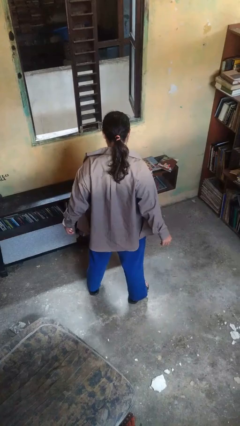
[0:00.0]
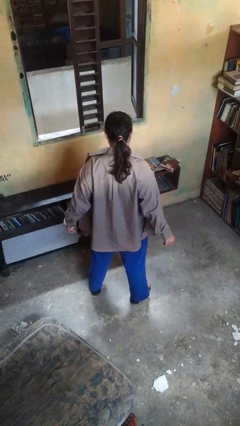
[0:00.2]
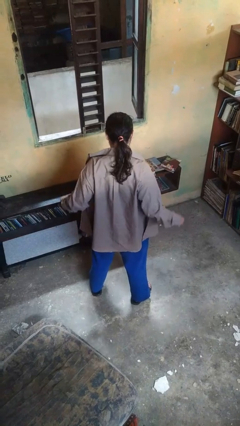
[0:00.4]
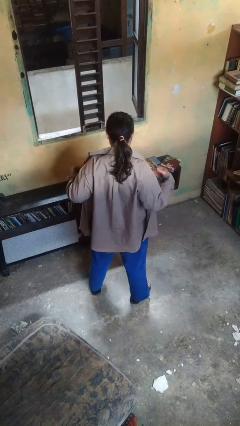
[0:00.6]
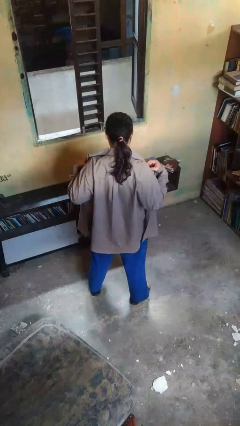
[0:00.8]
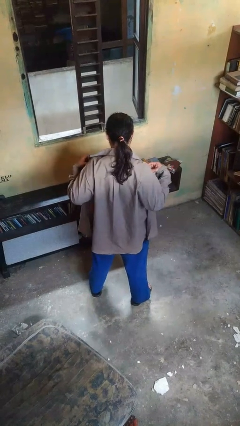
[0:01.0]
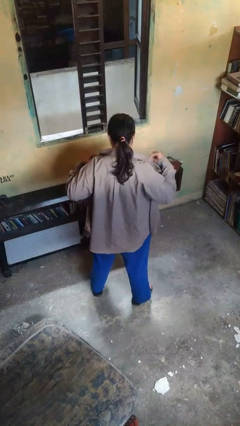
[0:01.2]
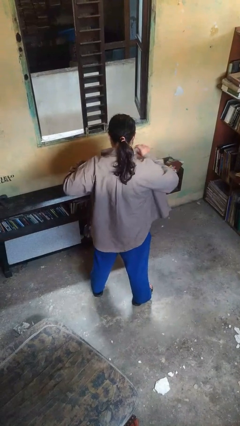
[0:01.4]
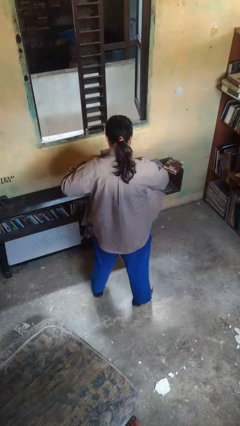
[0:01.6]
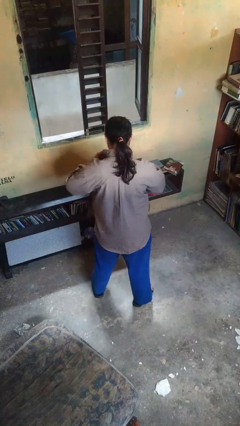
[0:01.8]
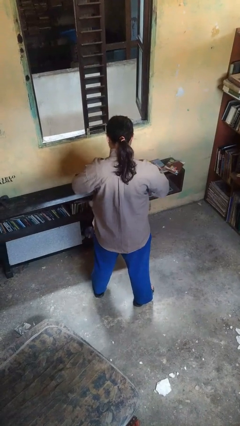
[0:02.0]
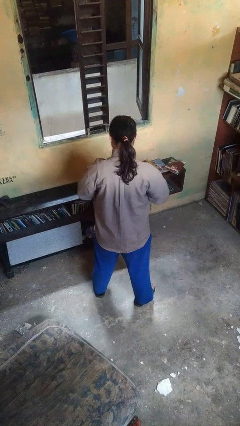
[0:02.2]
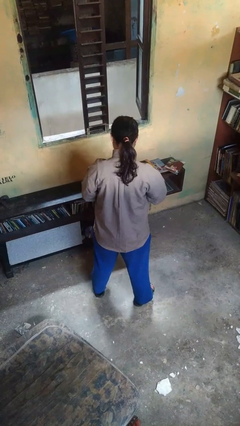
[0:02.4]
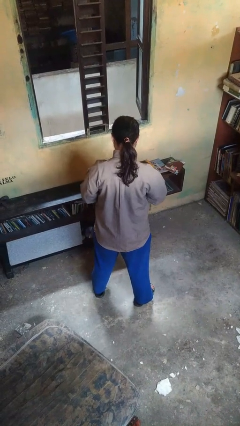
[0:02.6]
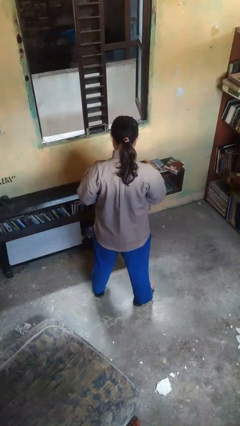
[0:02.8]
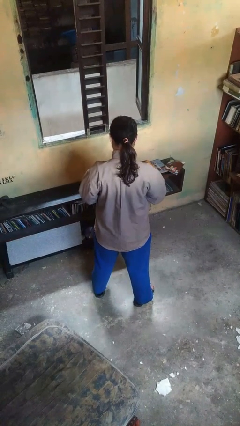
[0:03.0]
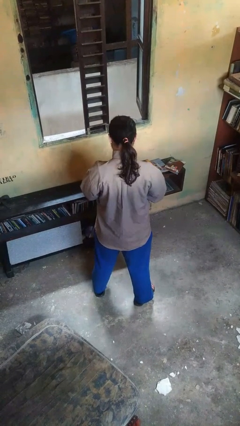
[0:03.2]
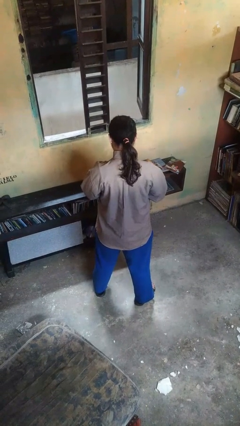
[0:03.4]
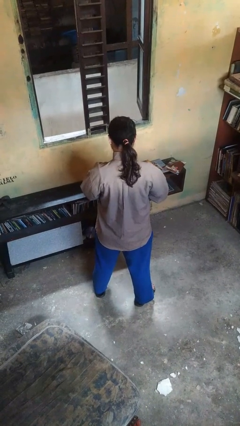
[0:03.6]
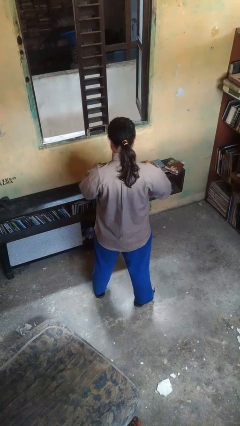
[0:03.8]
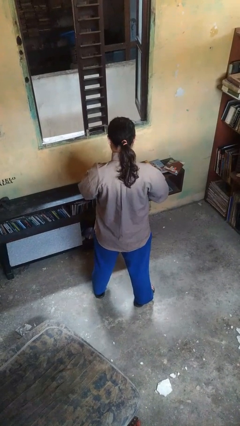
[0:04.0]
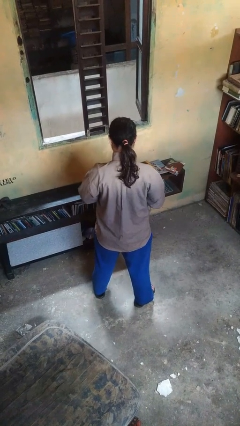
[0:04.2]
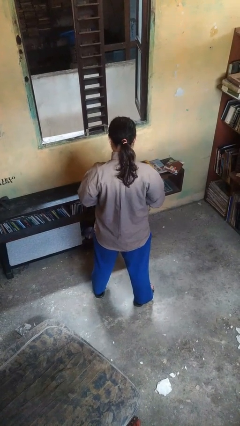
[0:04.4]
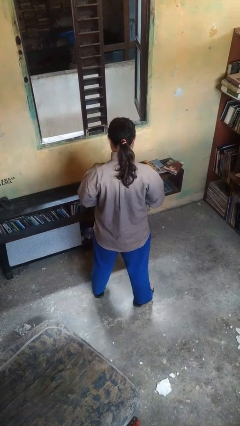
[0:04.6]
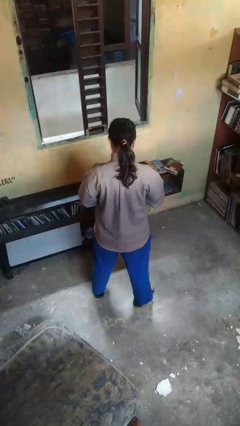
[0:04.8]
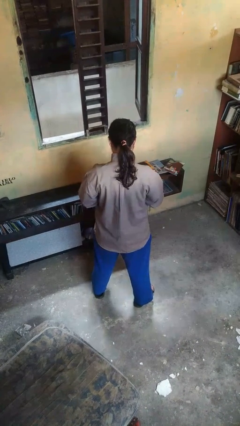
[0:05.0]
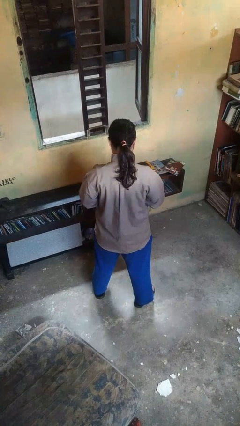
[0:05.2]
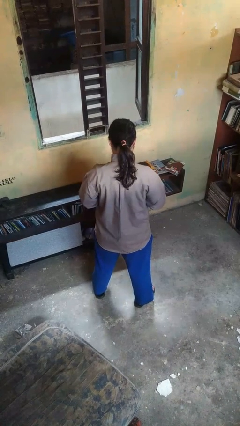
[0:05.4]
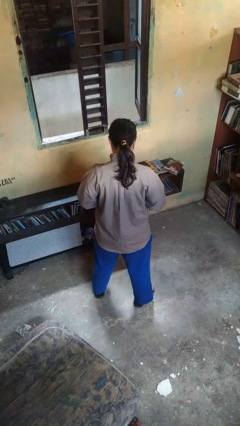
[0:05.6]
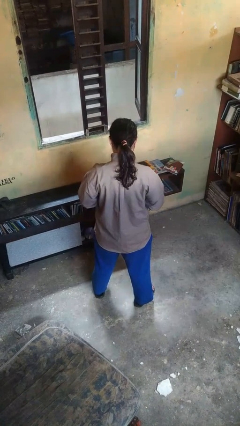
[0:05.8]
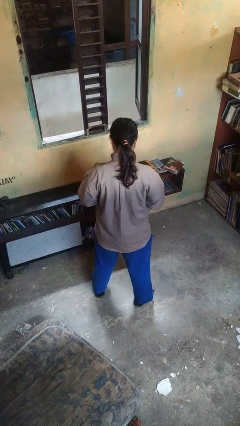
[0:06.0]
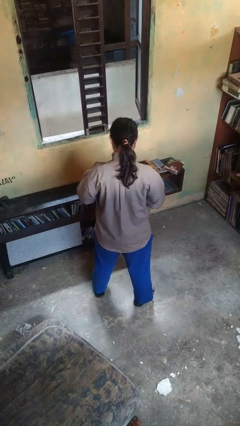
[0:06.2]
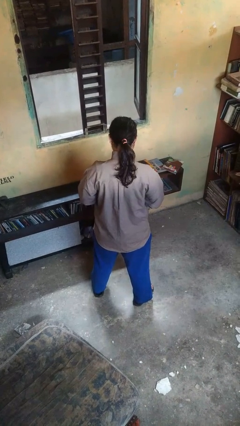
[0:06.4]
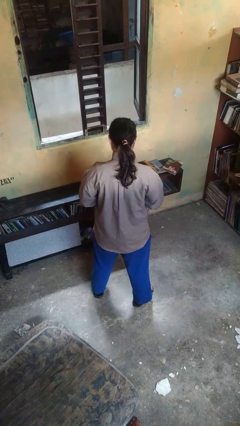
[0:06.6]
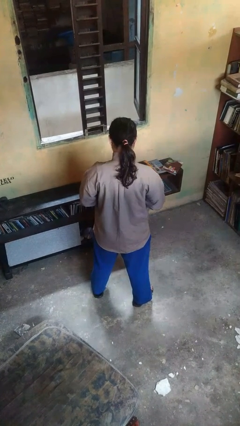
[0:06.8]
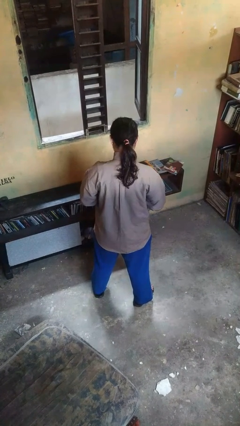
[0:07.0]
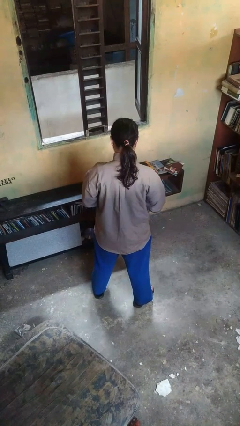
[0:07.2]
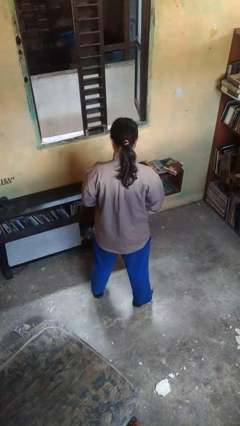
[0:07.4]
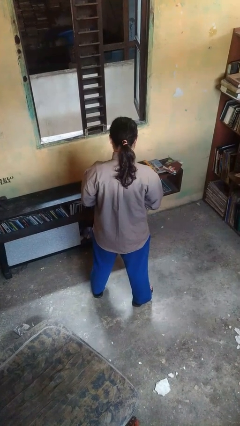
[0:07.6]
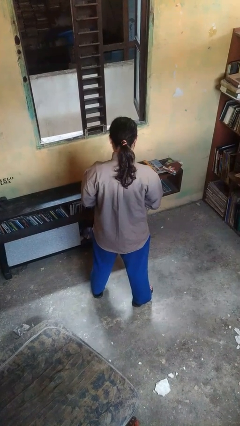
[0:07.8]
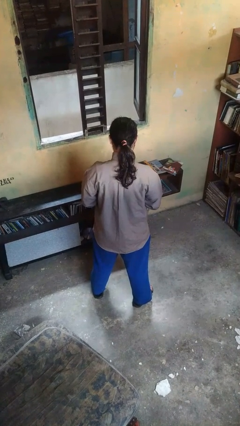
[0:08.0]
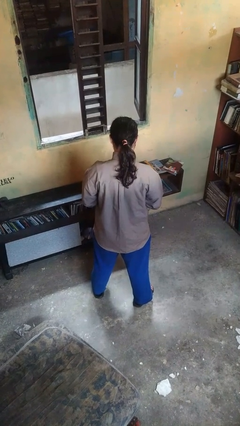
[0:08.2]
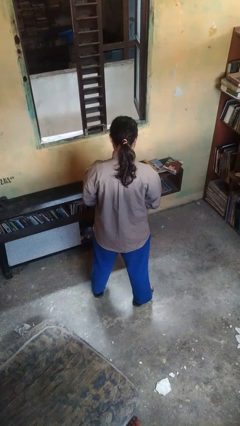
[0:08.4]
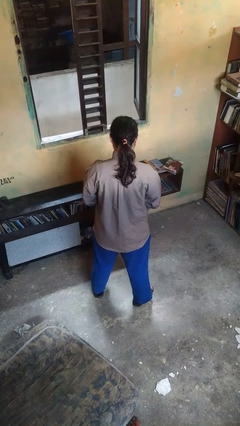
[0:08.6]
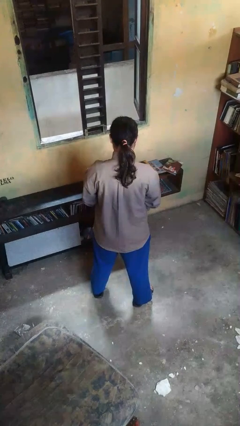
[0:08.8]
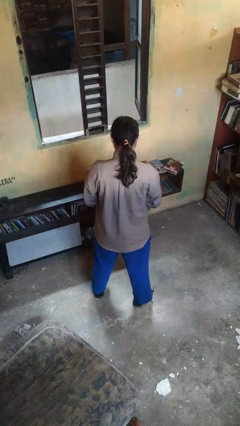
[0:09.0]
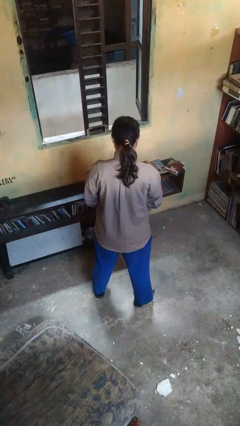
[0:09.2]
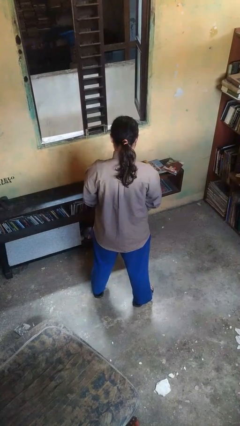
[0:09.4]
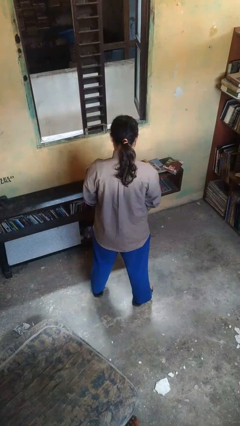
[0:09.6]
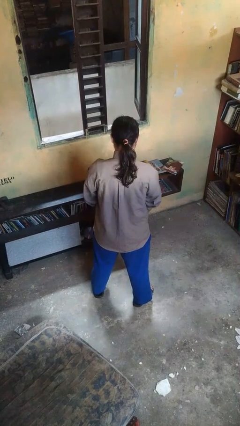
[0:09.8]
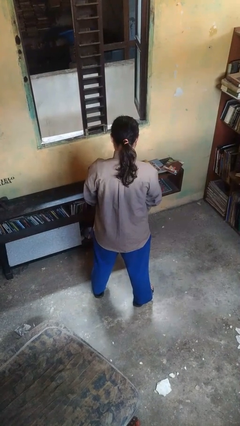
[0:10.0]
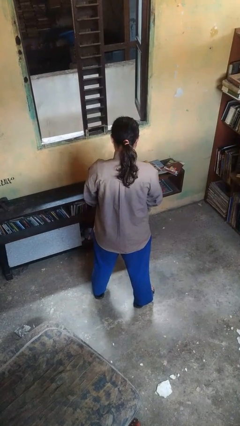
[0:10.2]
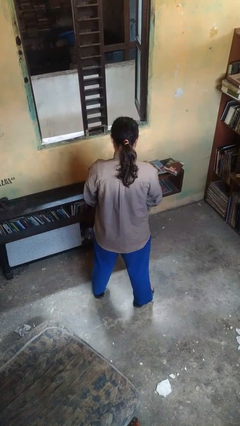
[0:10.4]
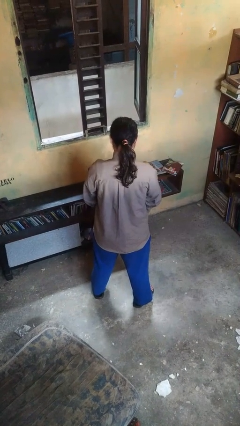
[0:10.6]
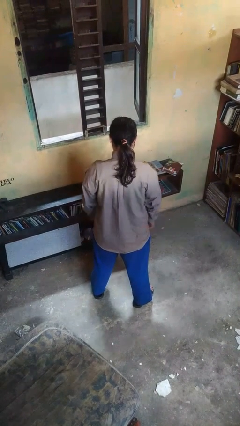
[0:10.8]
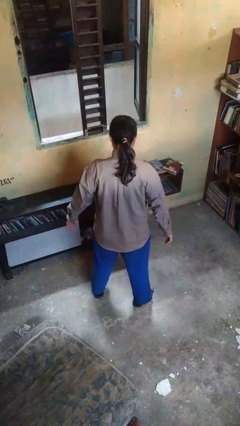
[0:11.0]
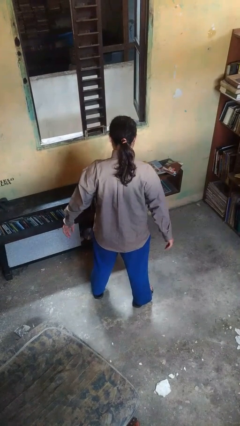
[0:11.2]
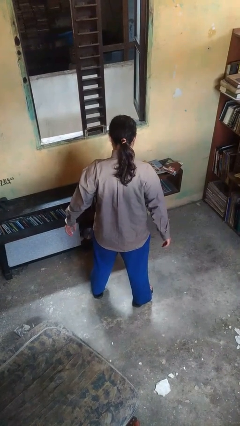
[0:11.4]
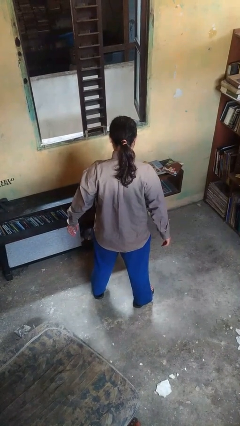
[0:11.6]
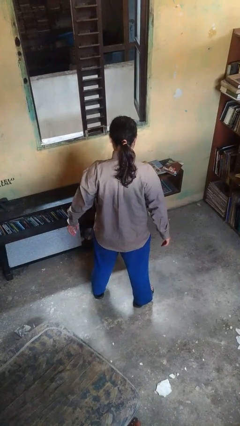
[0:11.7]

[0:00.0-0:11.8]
person buttons shirt

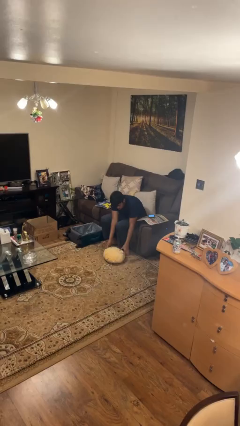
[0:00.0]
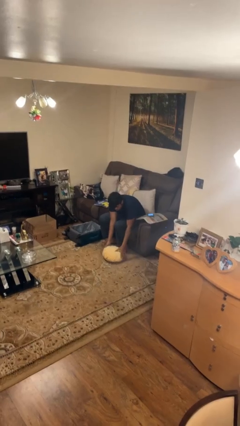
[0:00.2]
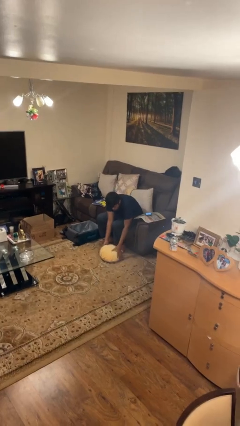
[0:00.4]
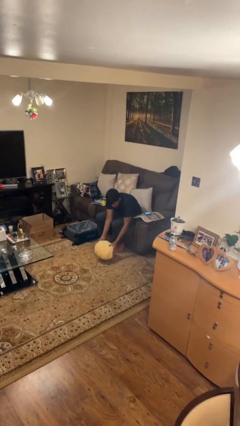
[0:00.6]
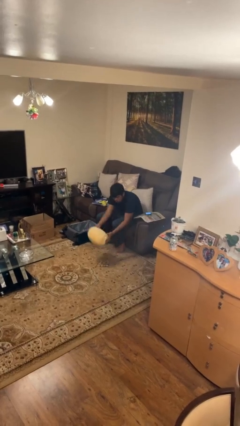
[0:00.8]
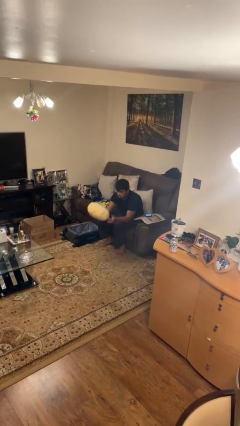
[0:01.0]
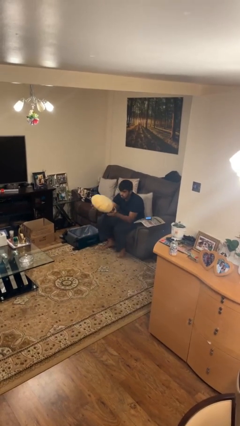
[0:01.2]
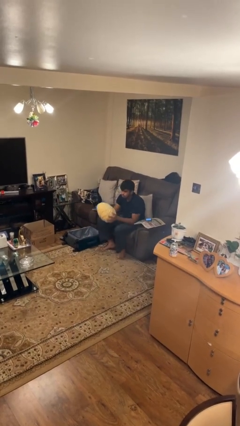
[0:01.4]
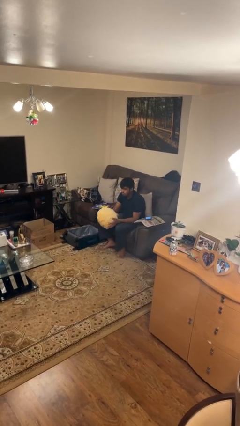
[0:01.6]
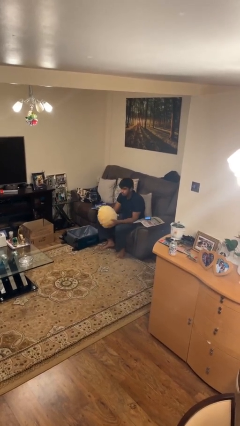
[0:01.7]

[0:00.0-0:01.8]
person picks up object from floor

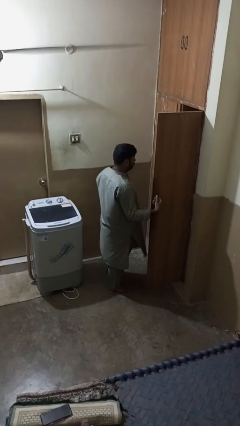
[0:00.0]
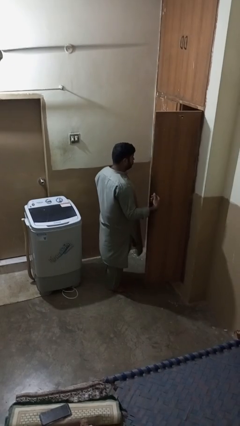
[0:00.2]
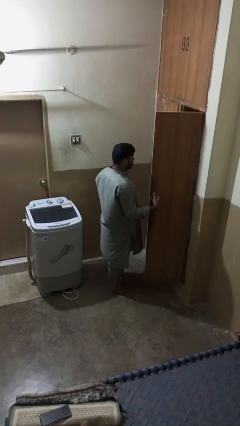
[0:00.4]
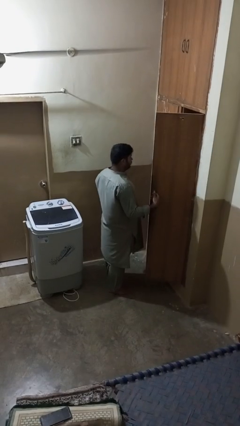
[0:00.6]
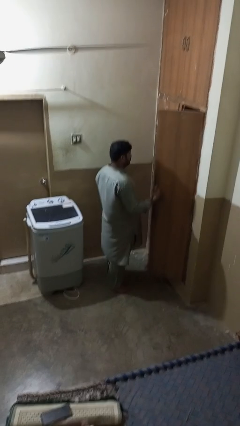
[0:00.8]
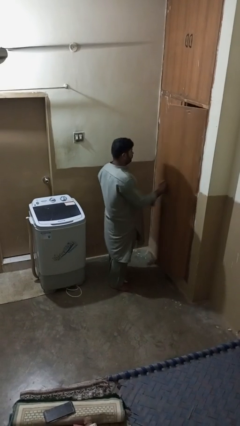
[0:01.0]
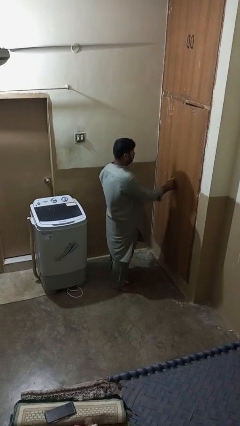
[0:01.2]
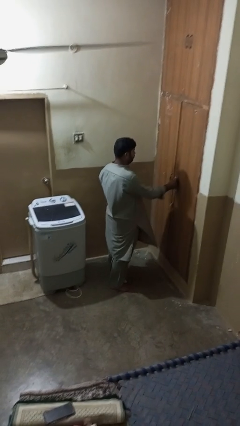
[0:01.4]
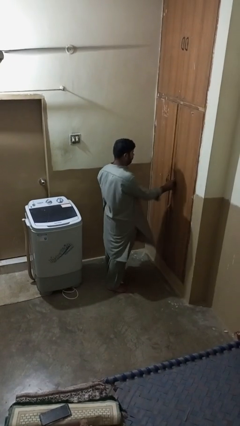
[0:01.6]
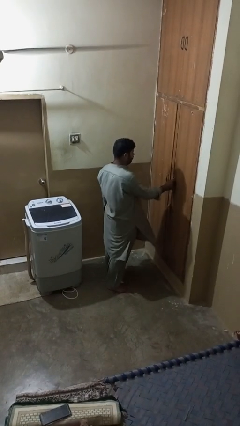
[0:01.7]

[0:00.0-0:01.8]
person closes closet door

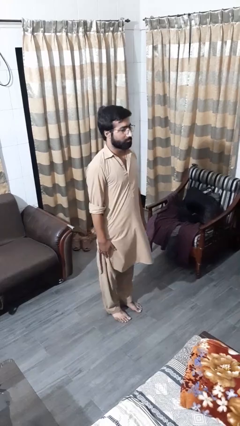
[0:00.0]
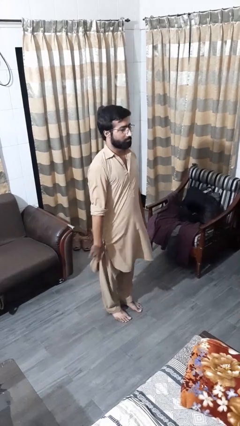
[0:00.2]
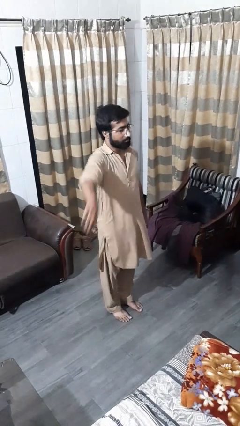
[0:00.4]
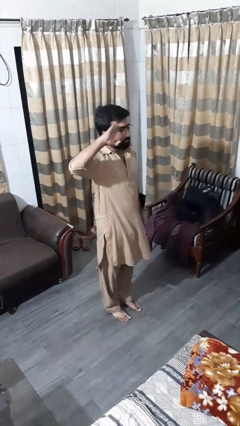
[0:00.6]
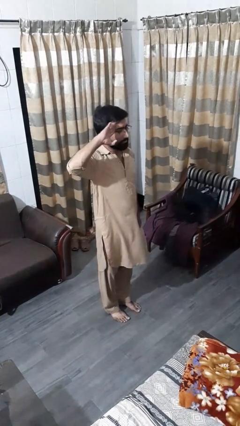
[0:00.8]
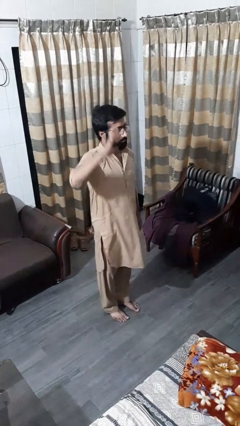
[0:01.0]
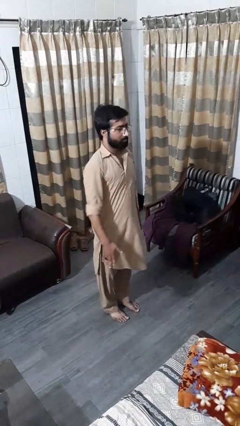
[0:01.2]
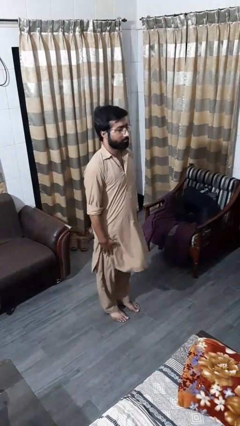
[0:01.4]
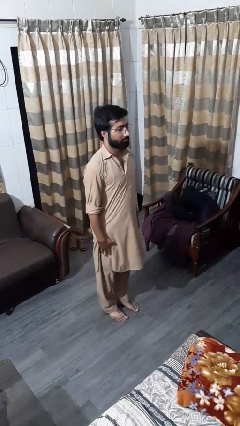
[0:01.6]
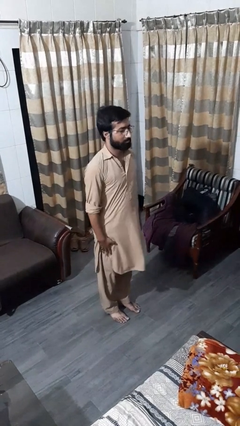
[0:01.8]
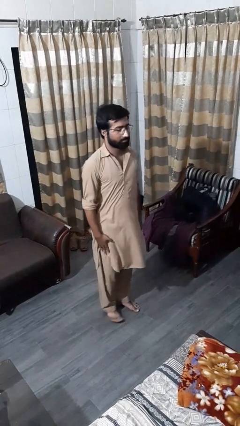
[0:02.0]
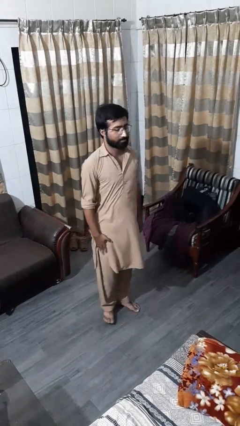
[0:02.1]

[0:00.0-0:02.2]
person salutes
